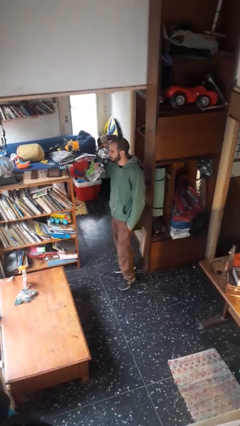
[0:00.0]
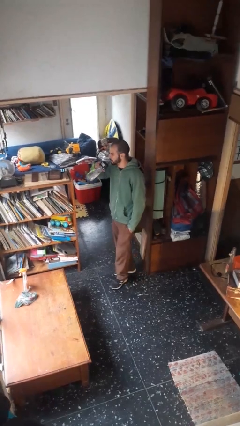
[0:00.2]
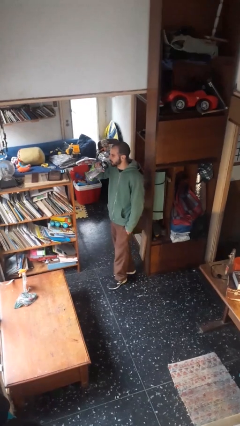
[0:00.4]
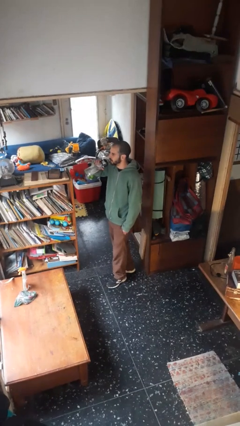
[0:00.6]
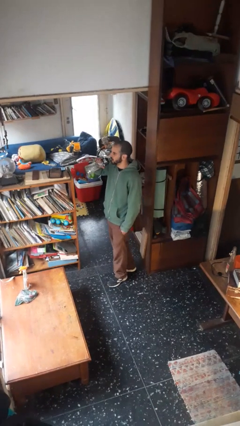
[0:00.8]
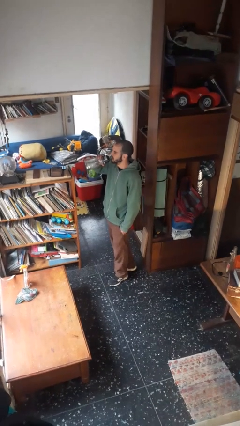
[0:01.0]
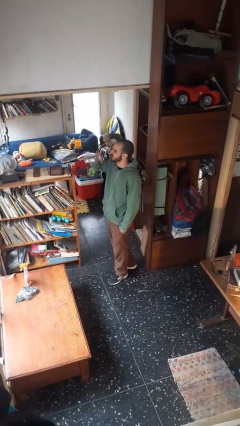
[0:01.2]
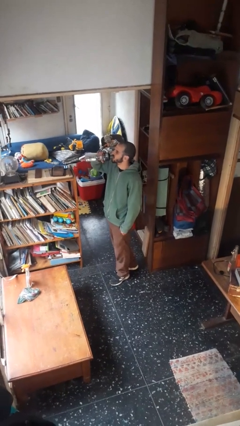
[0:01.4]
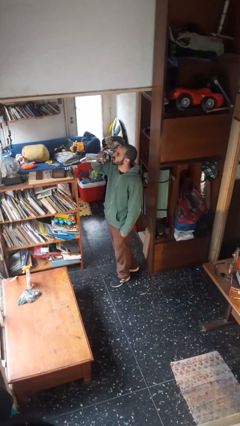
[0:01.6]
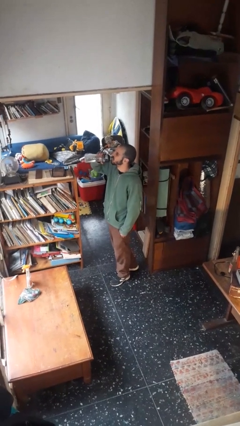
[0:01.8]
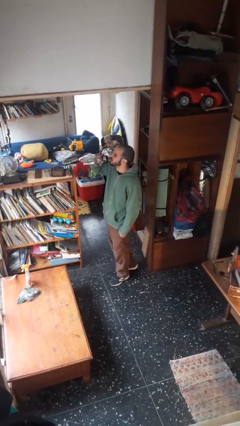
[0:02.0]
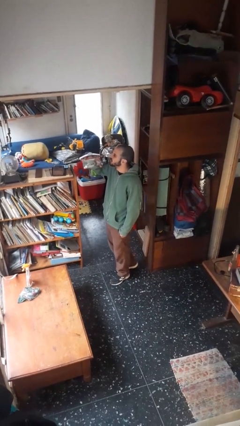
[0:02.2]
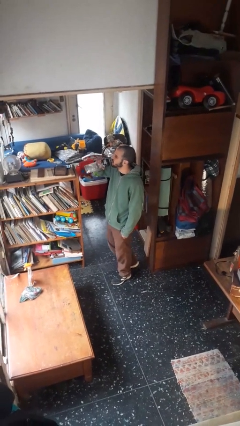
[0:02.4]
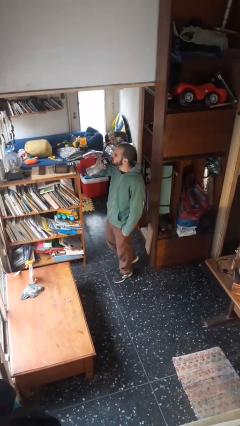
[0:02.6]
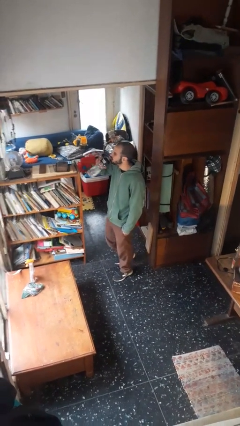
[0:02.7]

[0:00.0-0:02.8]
person drinks from bottle

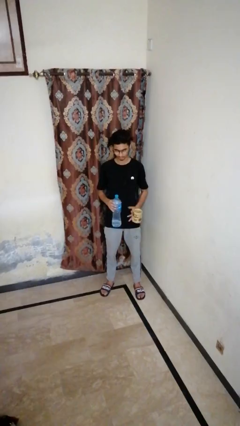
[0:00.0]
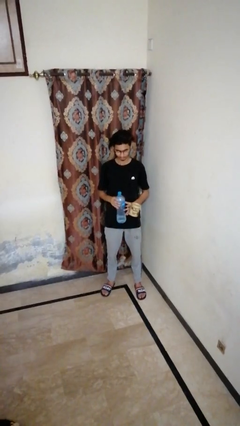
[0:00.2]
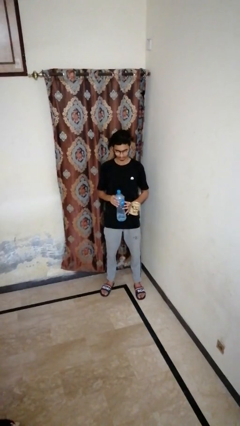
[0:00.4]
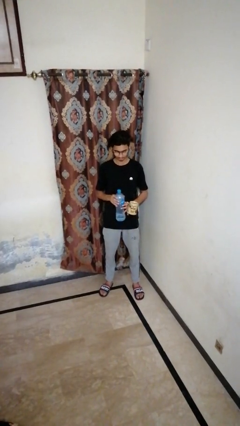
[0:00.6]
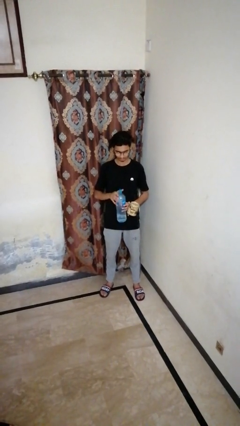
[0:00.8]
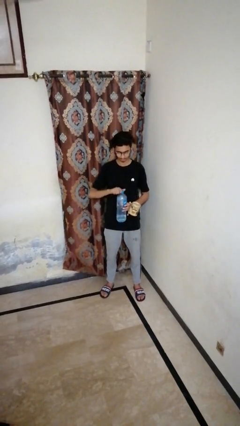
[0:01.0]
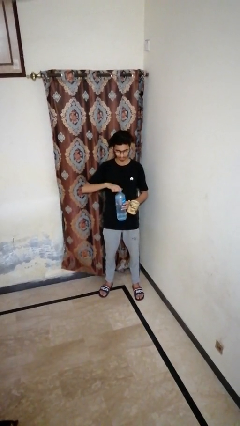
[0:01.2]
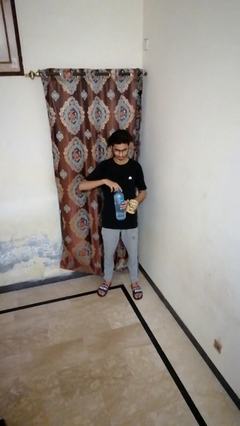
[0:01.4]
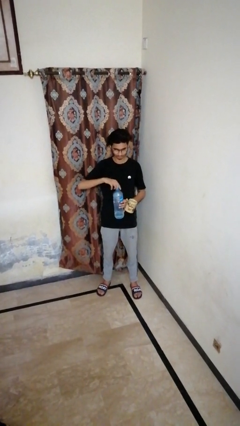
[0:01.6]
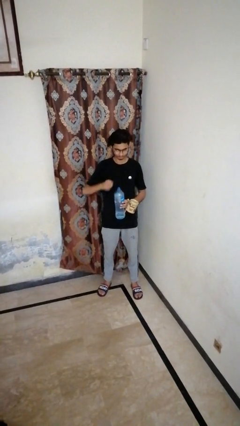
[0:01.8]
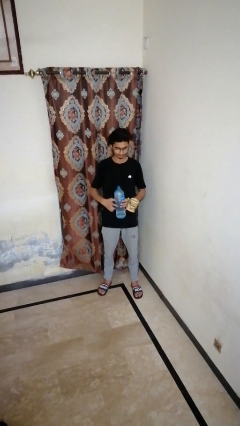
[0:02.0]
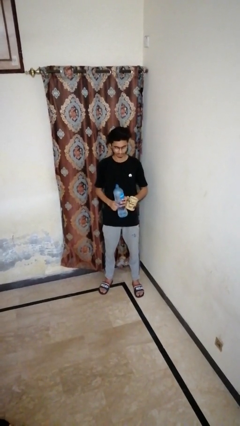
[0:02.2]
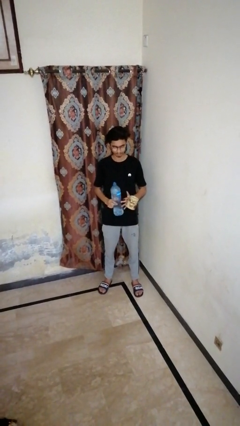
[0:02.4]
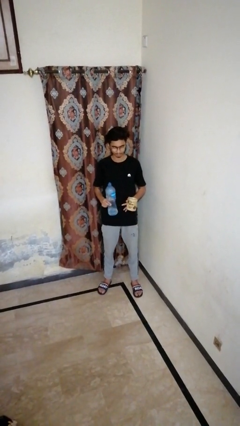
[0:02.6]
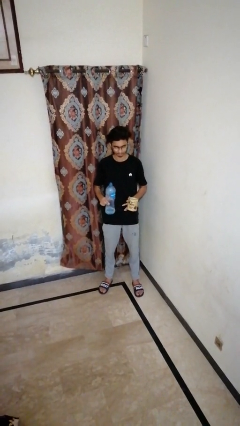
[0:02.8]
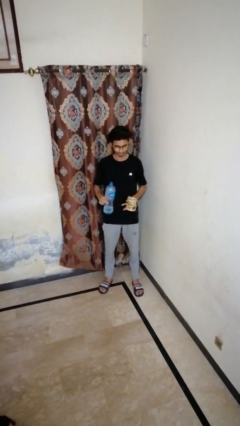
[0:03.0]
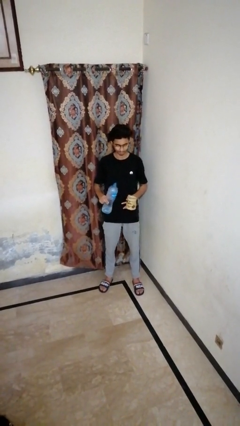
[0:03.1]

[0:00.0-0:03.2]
person unscrews lid from bottle

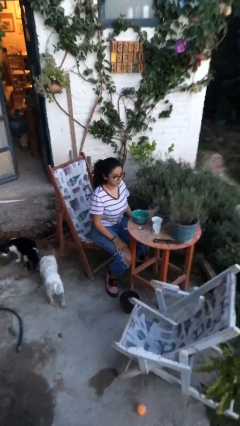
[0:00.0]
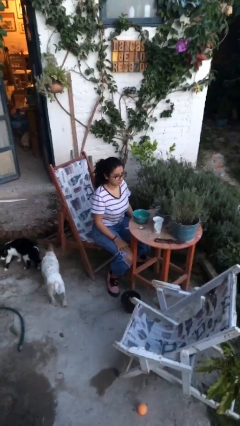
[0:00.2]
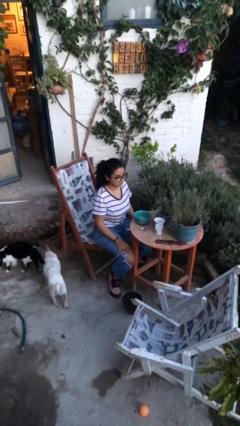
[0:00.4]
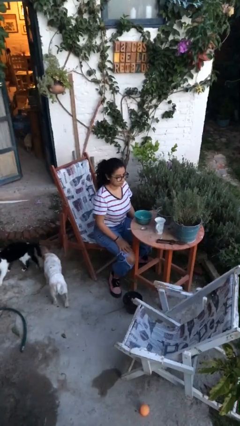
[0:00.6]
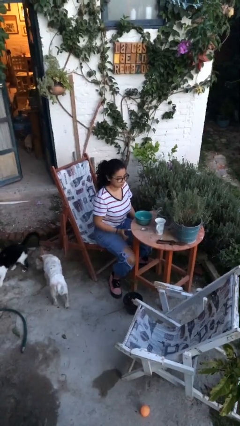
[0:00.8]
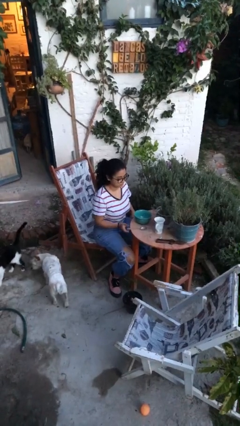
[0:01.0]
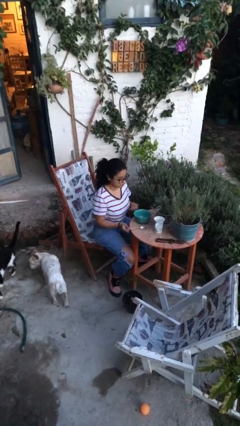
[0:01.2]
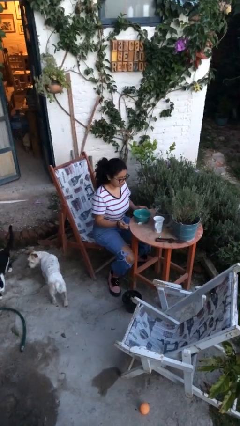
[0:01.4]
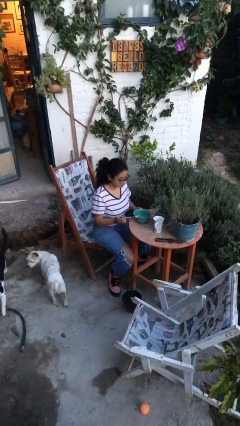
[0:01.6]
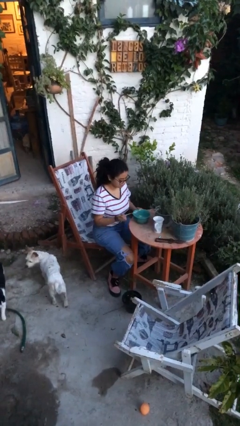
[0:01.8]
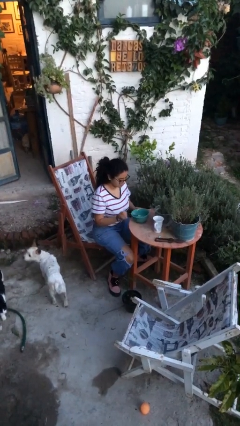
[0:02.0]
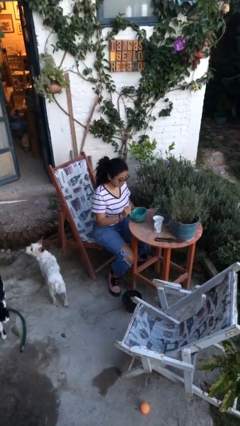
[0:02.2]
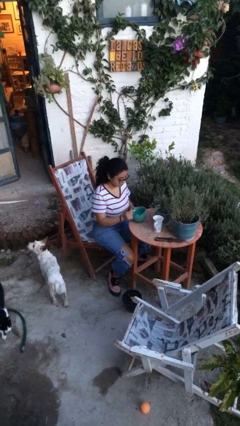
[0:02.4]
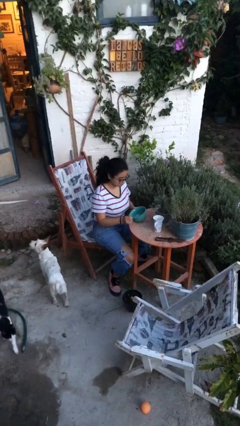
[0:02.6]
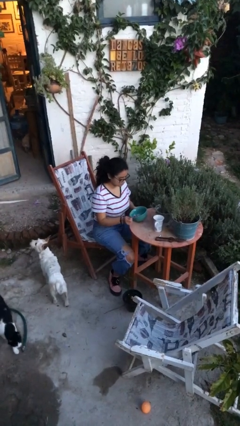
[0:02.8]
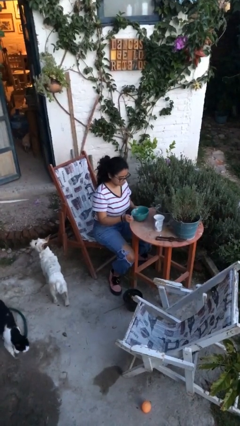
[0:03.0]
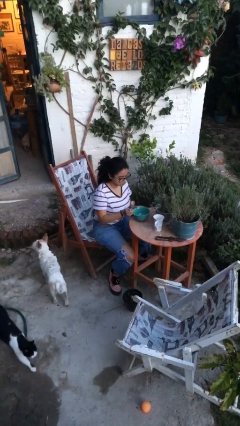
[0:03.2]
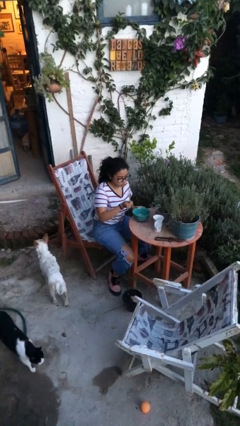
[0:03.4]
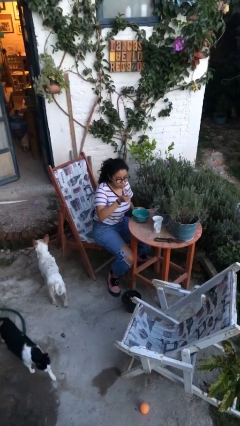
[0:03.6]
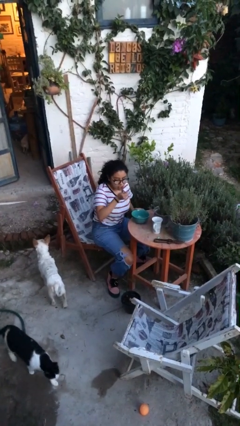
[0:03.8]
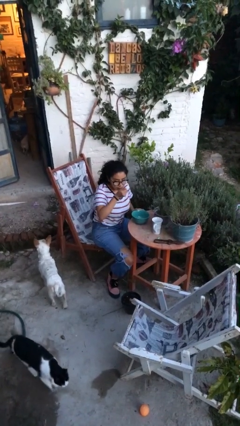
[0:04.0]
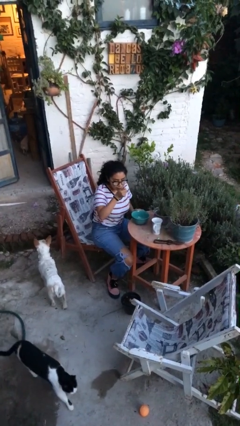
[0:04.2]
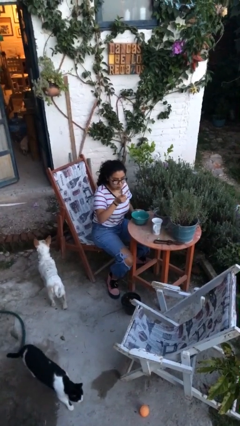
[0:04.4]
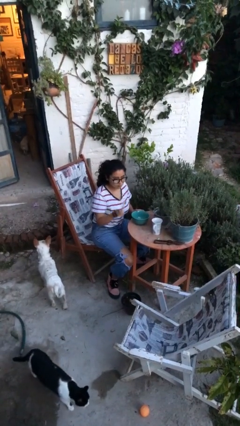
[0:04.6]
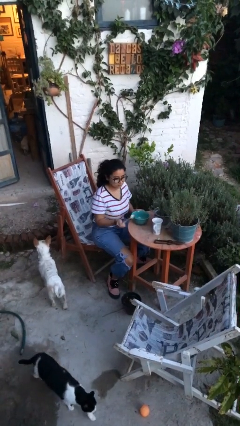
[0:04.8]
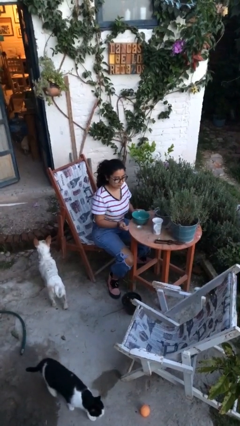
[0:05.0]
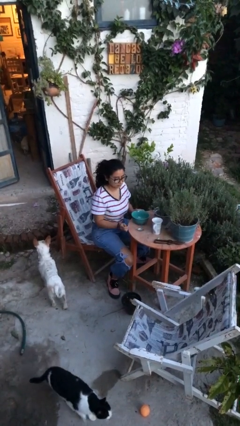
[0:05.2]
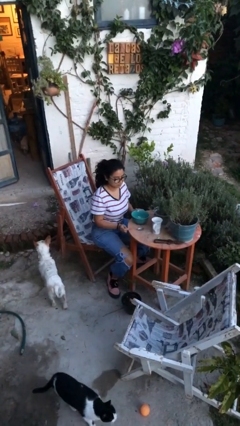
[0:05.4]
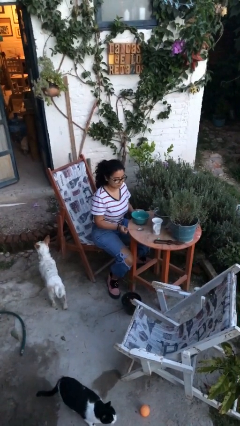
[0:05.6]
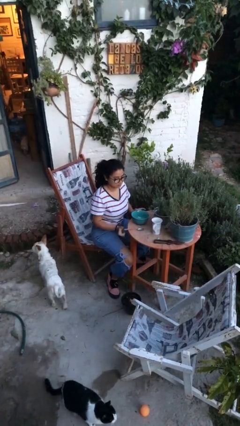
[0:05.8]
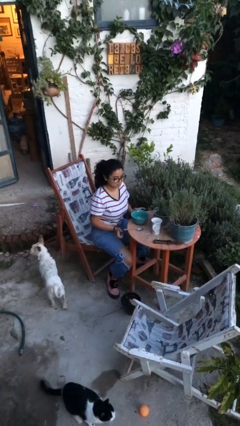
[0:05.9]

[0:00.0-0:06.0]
person eats with utensil

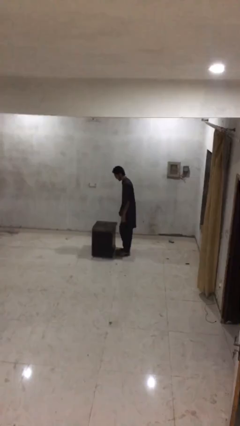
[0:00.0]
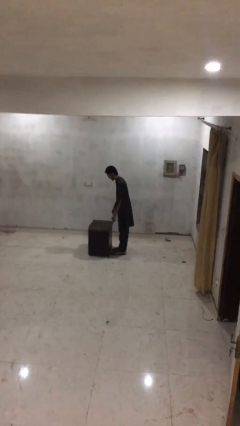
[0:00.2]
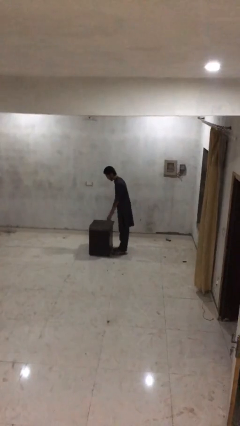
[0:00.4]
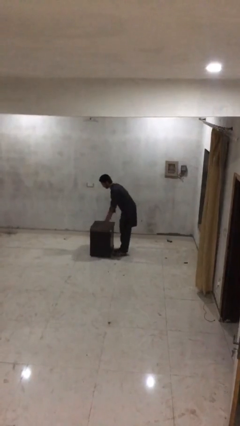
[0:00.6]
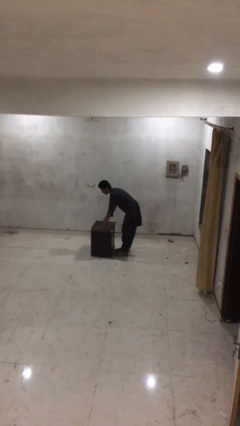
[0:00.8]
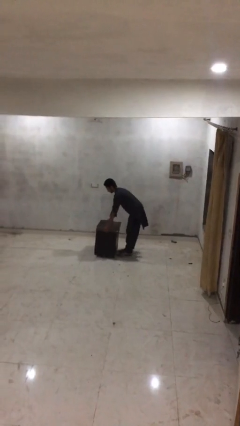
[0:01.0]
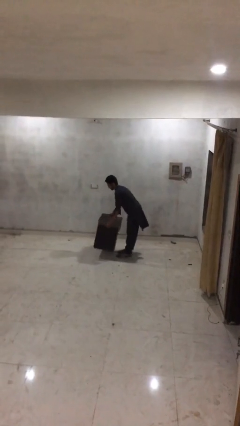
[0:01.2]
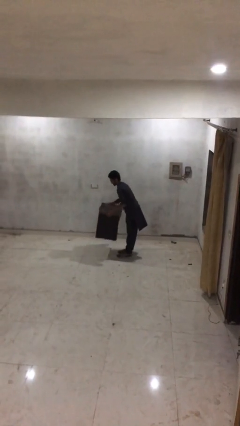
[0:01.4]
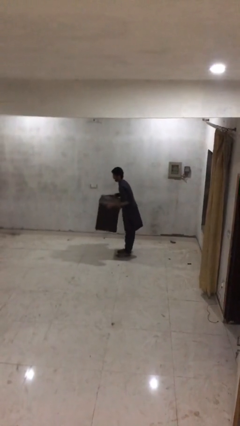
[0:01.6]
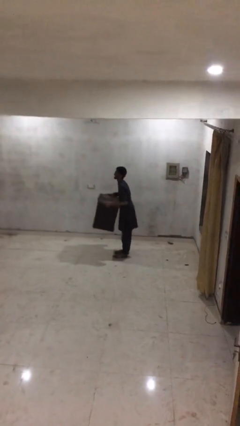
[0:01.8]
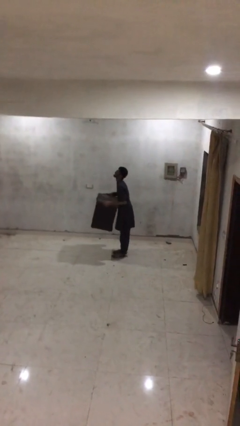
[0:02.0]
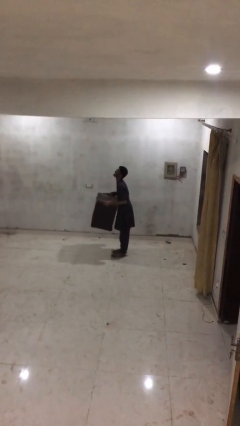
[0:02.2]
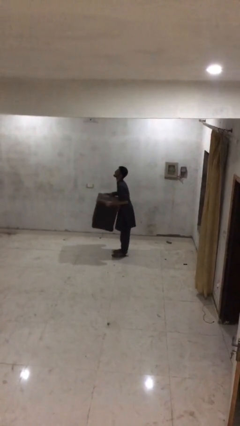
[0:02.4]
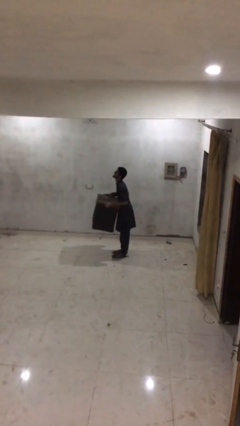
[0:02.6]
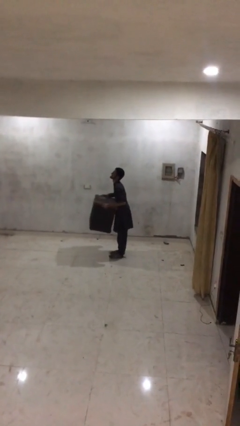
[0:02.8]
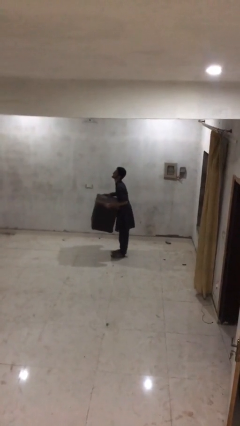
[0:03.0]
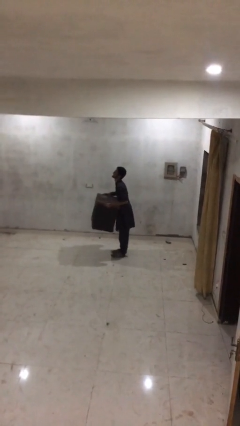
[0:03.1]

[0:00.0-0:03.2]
person picks up object from floor

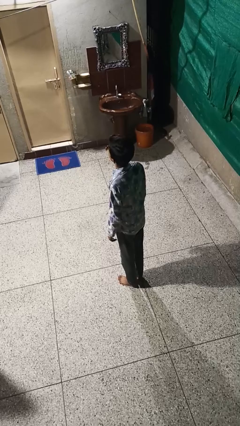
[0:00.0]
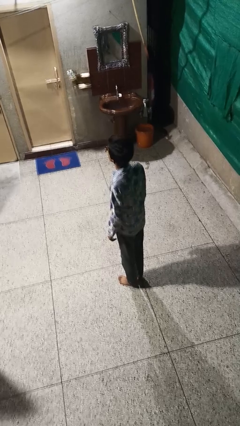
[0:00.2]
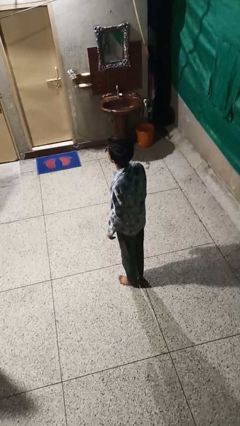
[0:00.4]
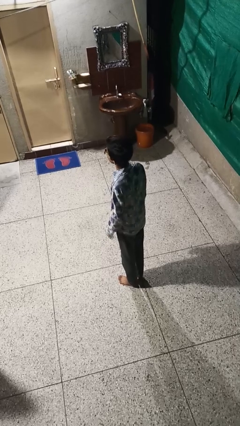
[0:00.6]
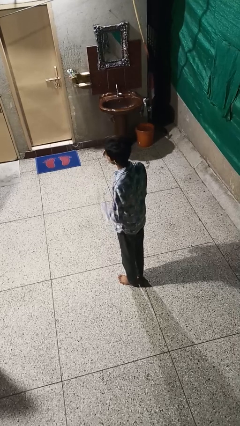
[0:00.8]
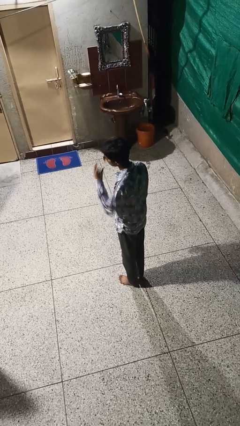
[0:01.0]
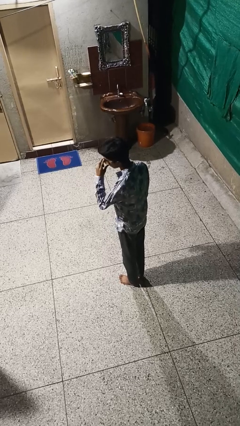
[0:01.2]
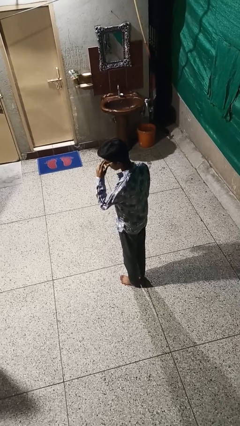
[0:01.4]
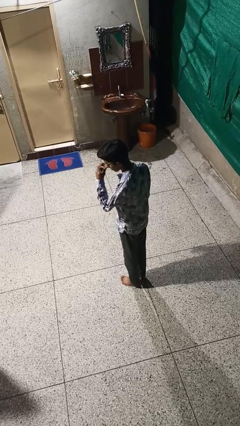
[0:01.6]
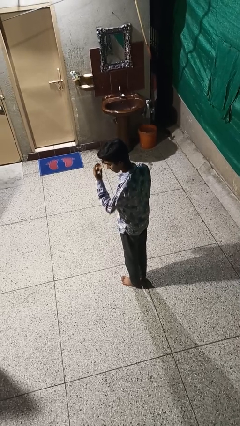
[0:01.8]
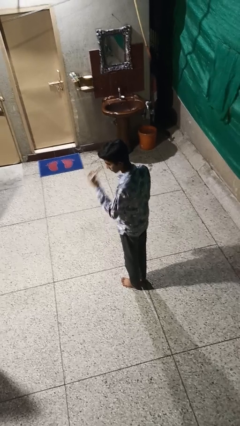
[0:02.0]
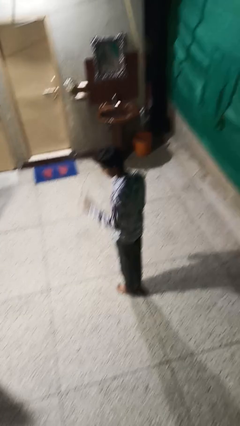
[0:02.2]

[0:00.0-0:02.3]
person takes off sunglasses

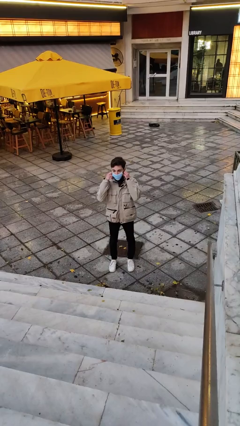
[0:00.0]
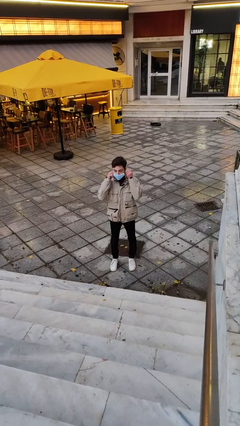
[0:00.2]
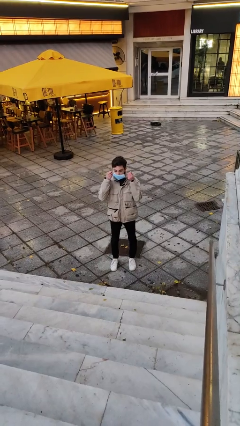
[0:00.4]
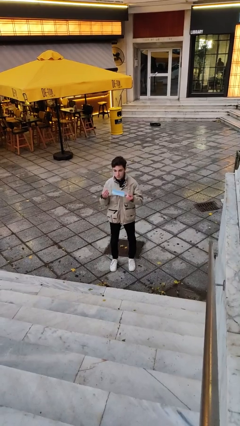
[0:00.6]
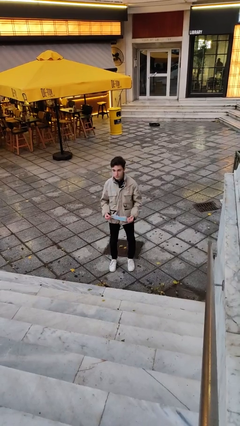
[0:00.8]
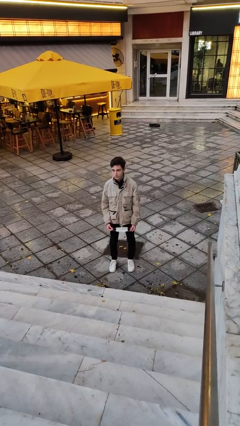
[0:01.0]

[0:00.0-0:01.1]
person takes off facemask
